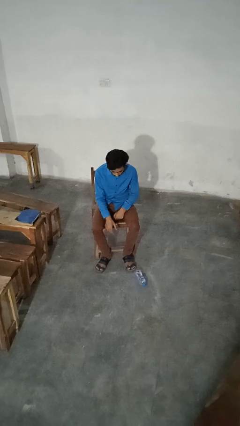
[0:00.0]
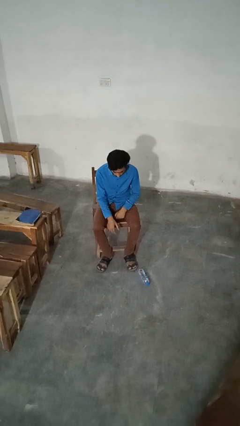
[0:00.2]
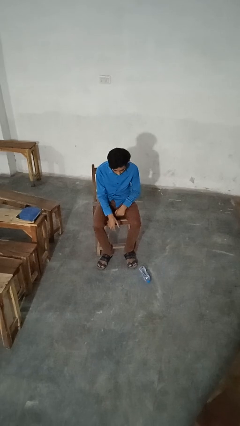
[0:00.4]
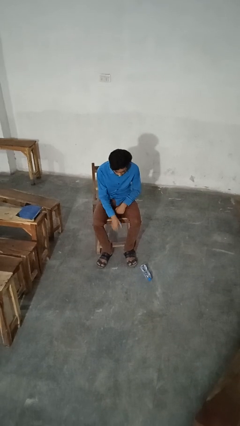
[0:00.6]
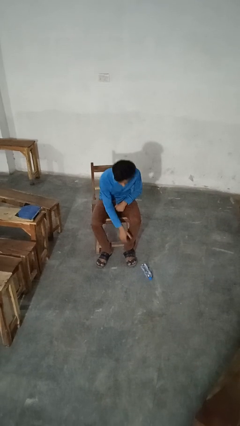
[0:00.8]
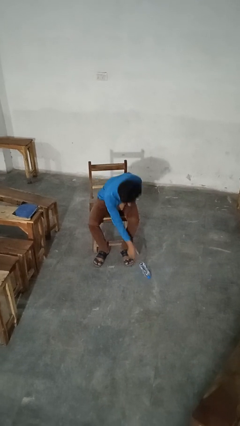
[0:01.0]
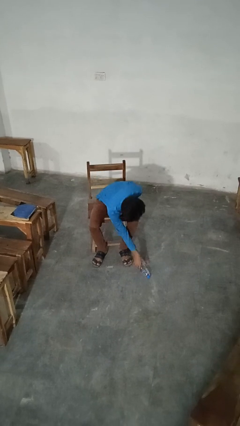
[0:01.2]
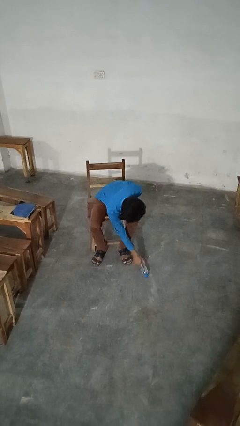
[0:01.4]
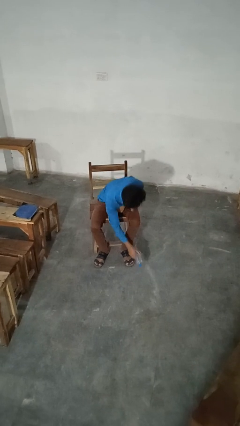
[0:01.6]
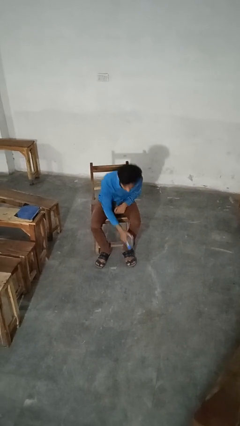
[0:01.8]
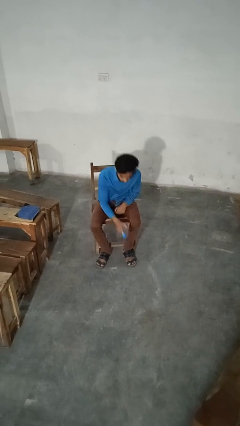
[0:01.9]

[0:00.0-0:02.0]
person picks up object from floor

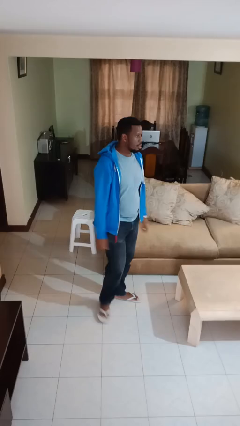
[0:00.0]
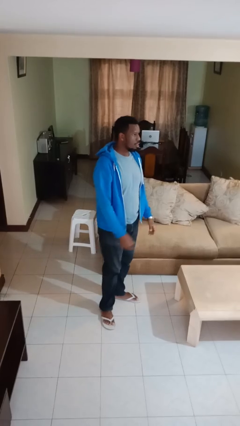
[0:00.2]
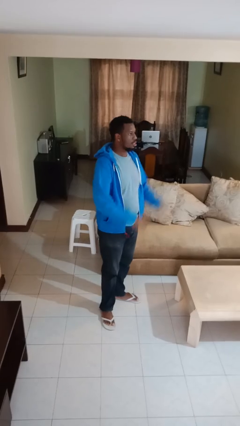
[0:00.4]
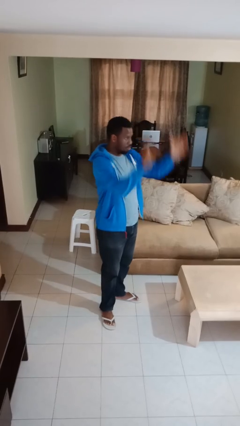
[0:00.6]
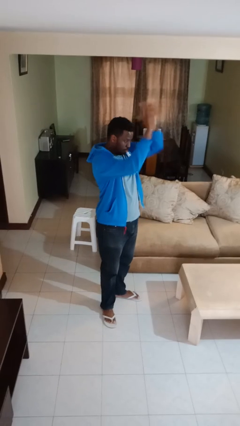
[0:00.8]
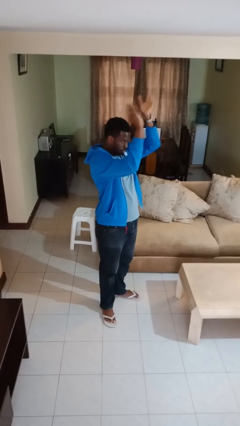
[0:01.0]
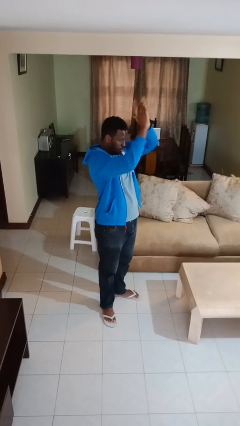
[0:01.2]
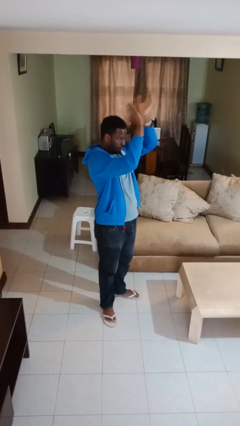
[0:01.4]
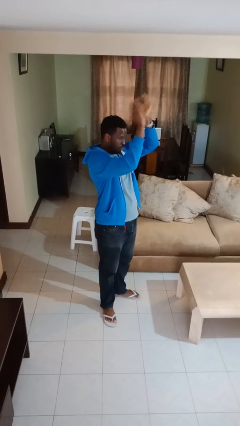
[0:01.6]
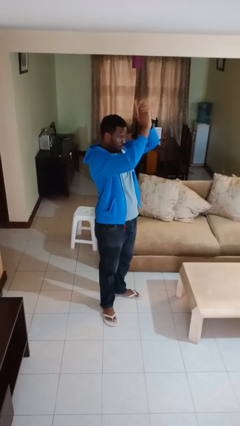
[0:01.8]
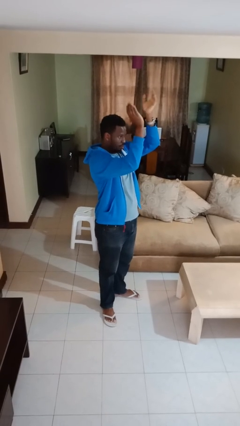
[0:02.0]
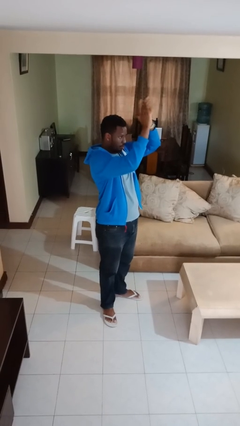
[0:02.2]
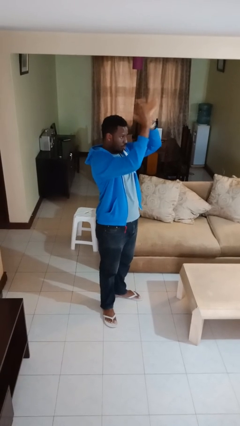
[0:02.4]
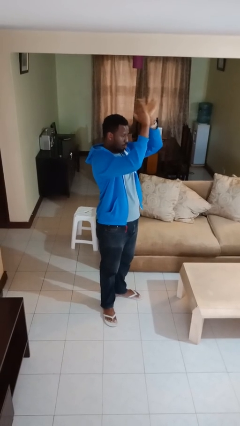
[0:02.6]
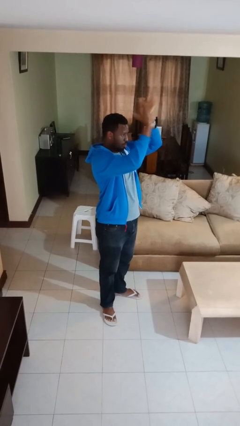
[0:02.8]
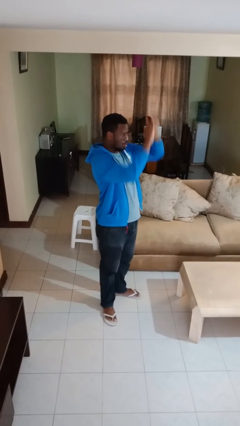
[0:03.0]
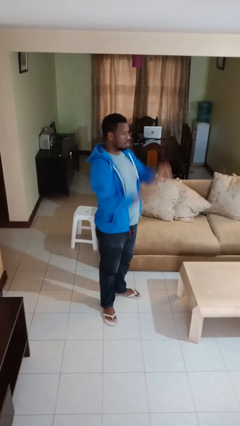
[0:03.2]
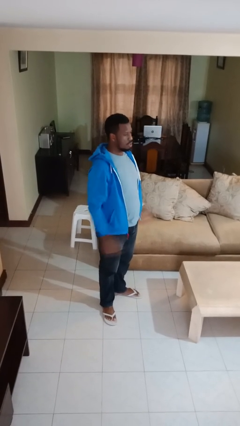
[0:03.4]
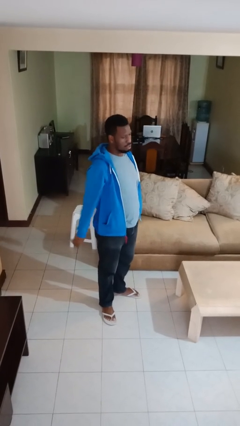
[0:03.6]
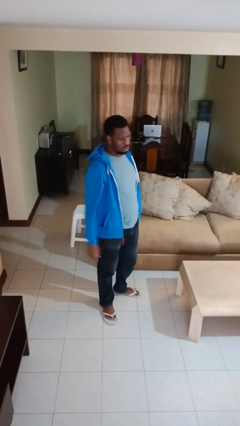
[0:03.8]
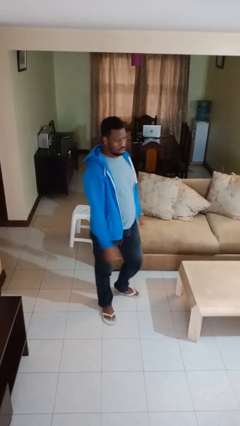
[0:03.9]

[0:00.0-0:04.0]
person claps hands

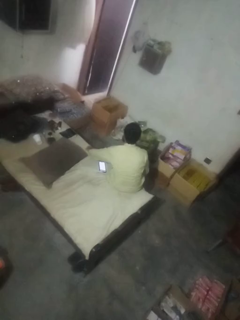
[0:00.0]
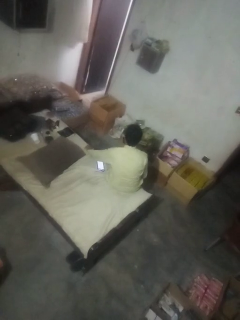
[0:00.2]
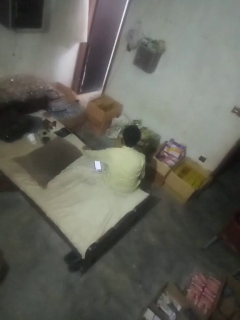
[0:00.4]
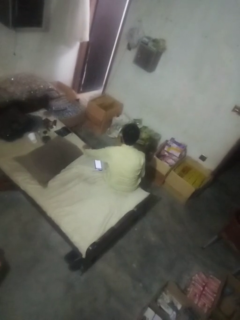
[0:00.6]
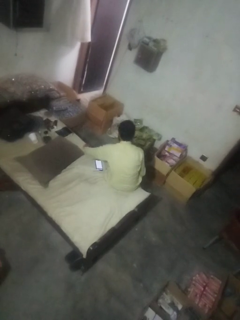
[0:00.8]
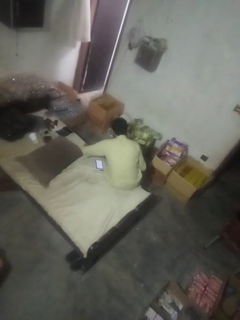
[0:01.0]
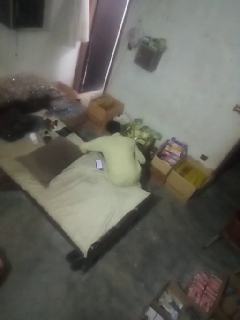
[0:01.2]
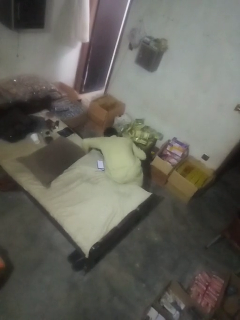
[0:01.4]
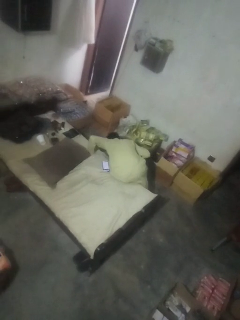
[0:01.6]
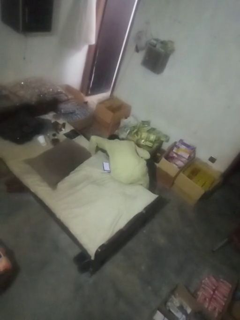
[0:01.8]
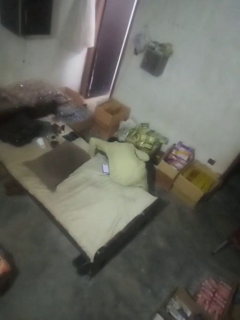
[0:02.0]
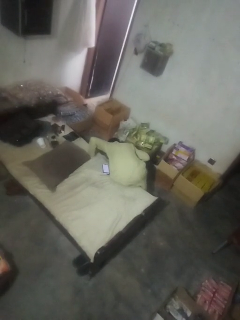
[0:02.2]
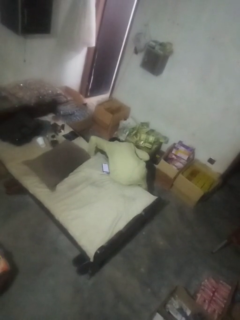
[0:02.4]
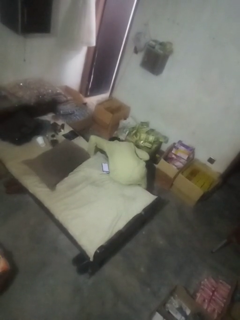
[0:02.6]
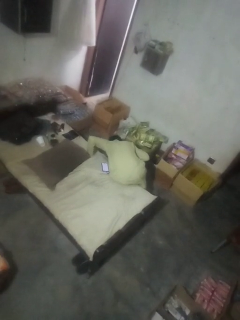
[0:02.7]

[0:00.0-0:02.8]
person searches under couch

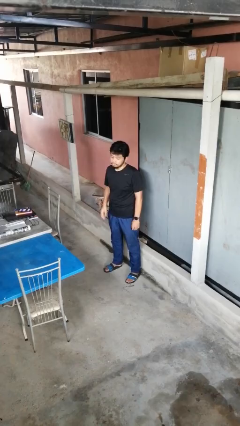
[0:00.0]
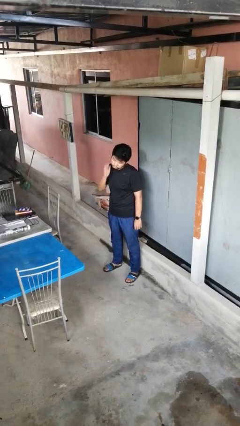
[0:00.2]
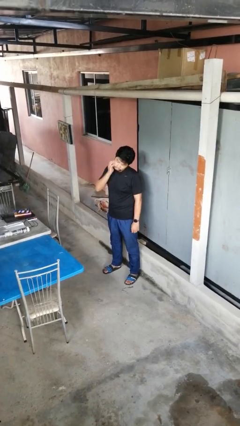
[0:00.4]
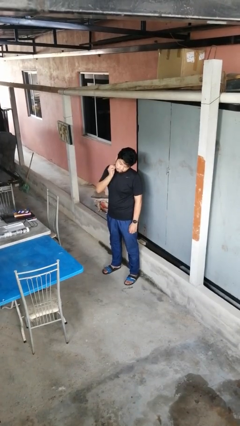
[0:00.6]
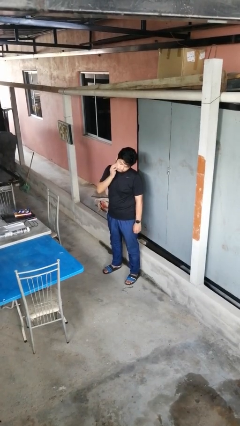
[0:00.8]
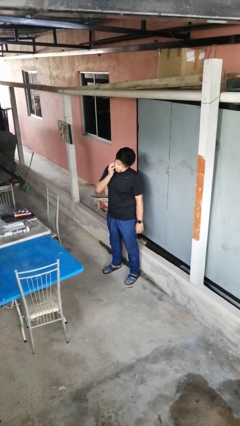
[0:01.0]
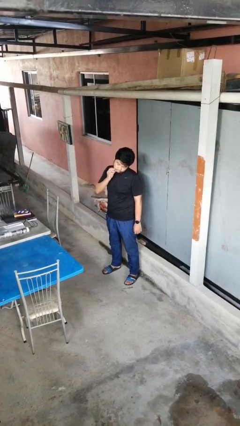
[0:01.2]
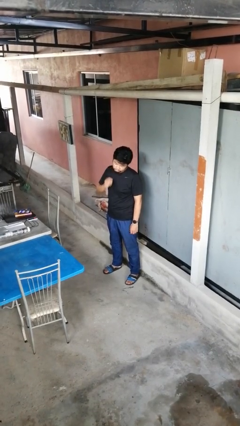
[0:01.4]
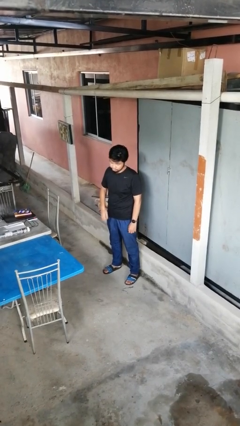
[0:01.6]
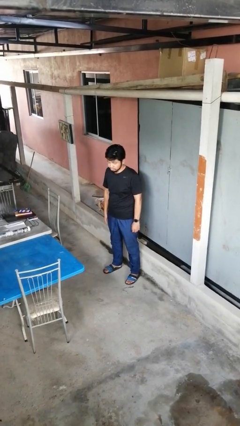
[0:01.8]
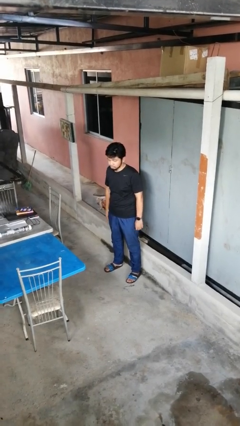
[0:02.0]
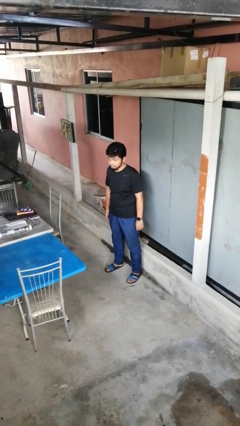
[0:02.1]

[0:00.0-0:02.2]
person scratches face

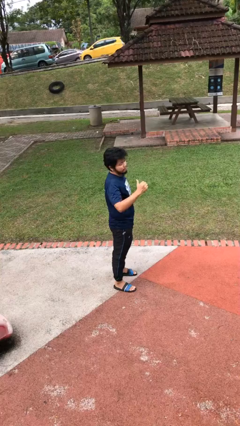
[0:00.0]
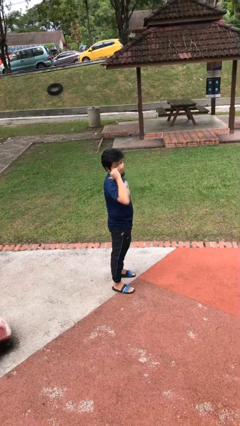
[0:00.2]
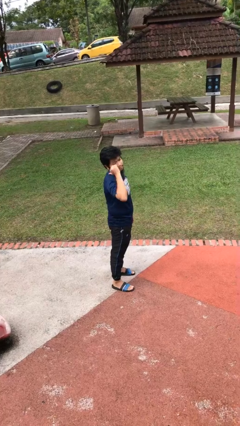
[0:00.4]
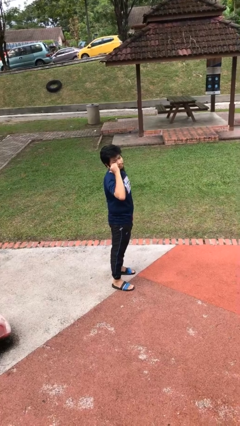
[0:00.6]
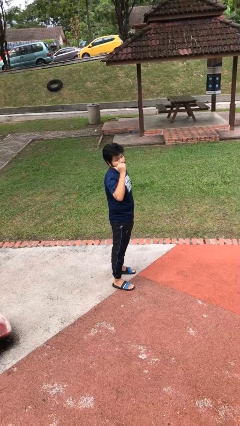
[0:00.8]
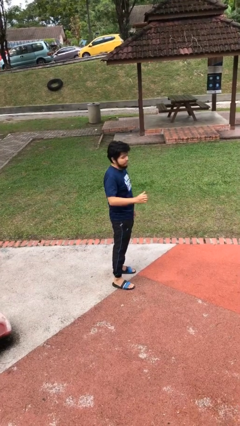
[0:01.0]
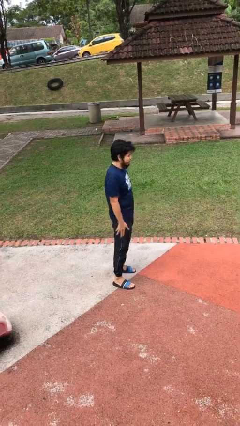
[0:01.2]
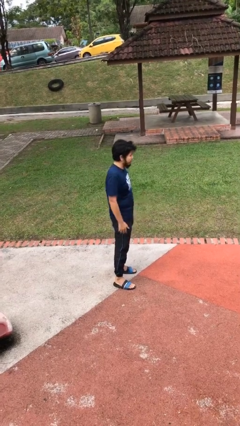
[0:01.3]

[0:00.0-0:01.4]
person gestures behind me

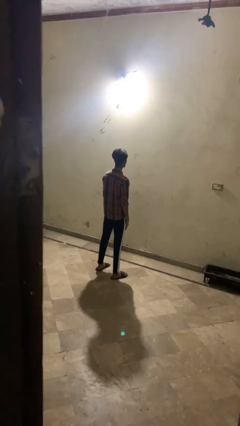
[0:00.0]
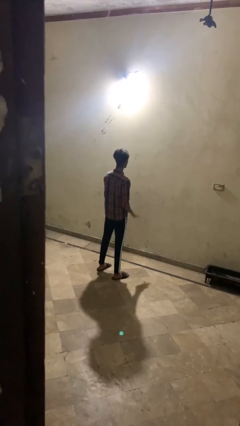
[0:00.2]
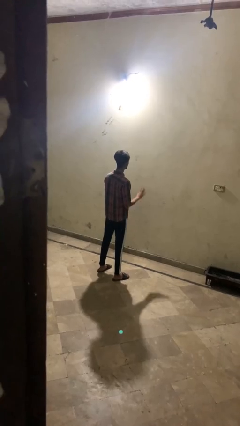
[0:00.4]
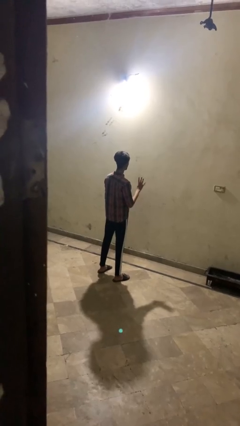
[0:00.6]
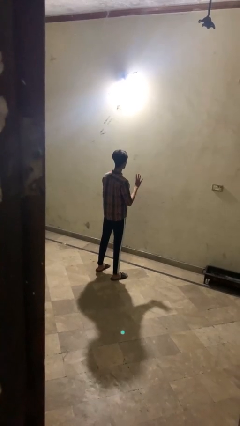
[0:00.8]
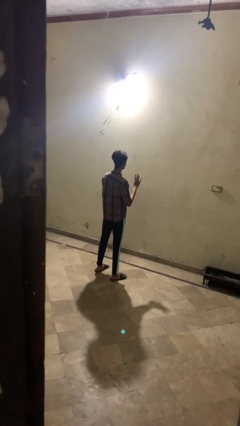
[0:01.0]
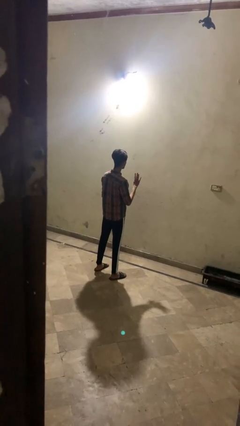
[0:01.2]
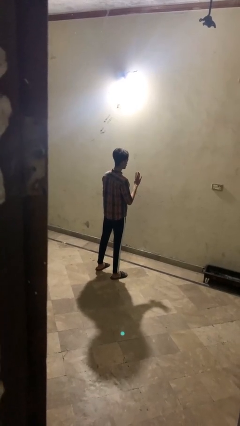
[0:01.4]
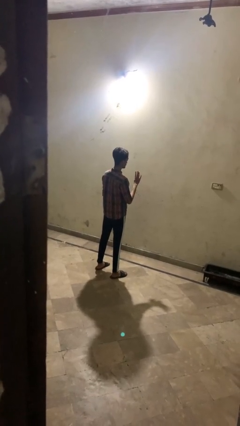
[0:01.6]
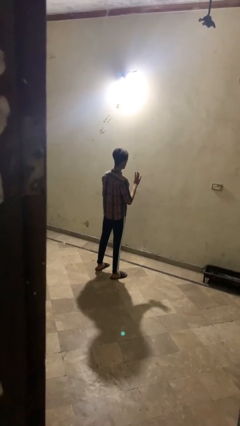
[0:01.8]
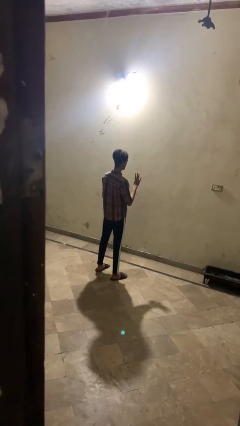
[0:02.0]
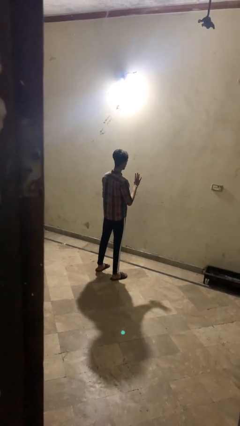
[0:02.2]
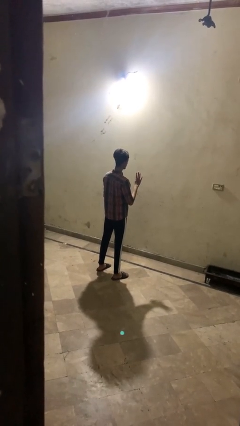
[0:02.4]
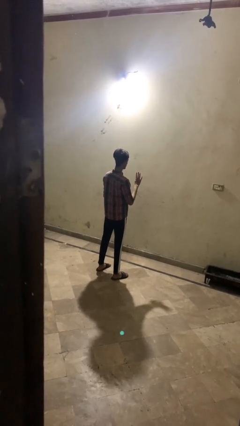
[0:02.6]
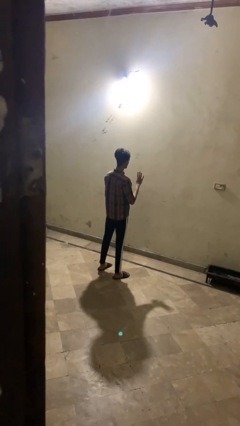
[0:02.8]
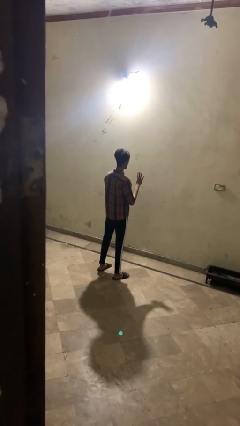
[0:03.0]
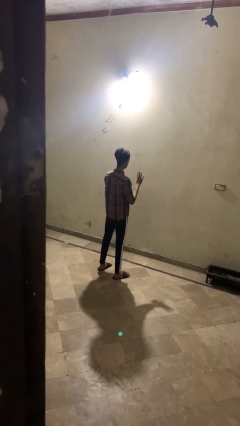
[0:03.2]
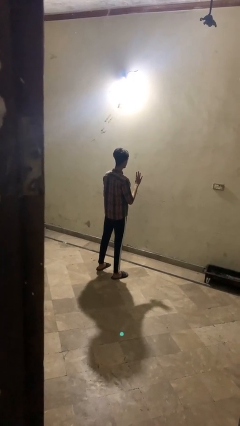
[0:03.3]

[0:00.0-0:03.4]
person gestures number four

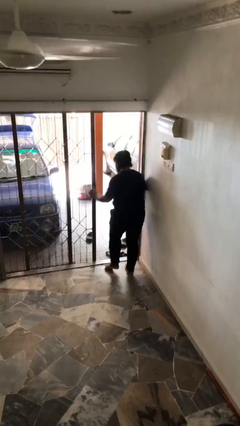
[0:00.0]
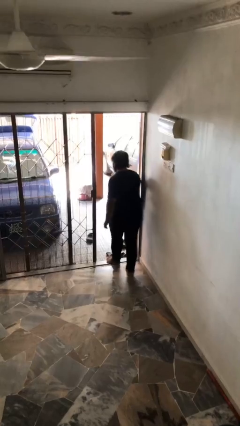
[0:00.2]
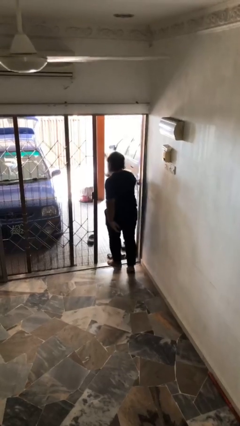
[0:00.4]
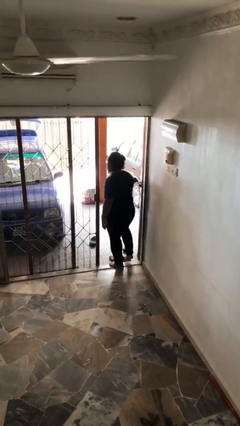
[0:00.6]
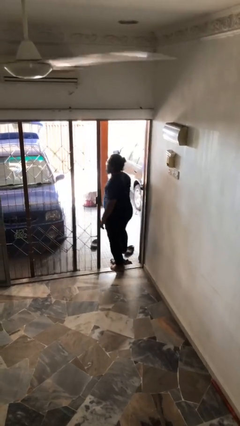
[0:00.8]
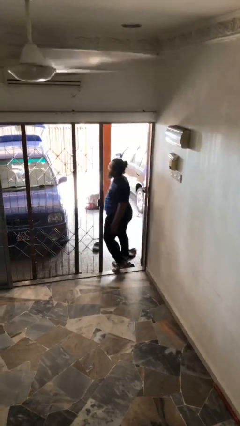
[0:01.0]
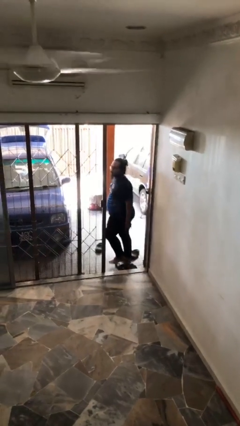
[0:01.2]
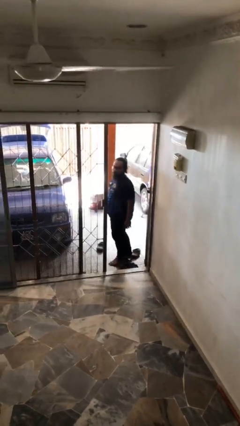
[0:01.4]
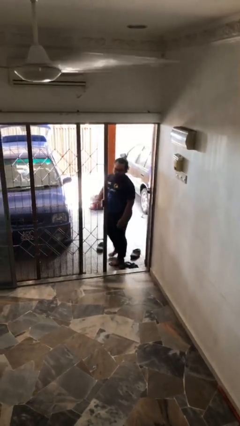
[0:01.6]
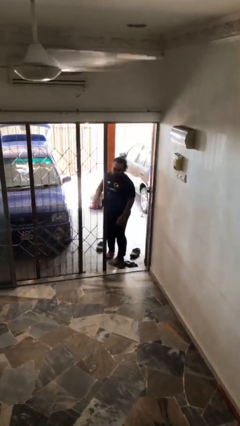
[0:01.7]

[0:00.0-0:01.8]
person exits scene through structure
